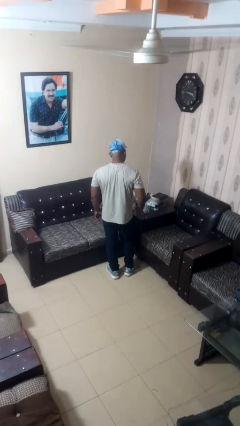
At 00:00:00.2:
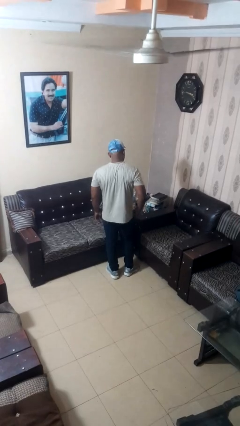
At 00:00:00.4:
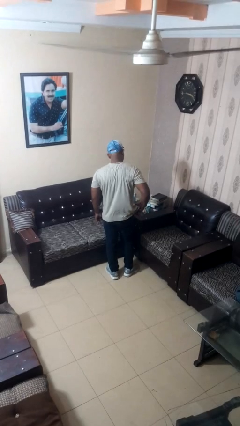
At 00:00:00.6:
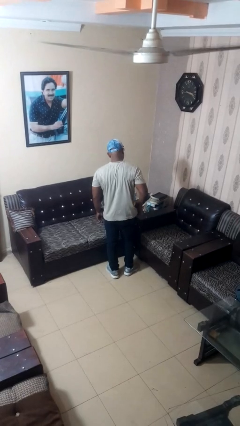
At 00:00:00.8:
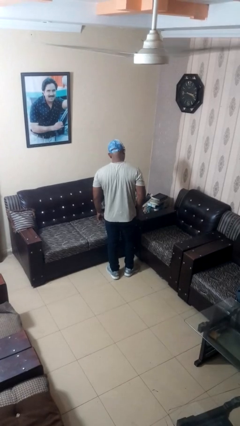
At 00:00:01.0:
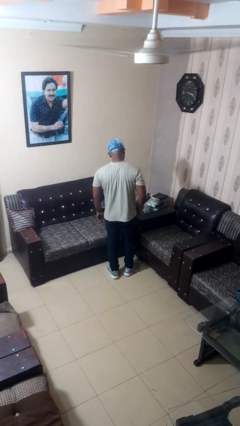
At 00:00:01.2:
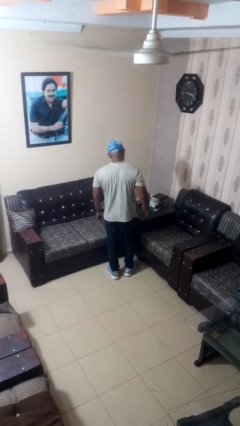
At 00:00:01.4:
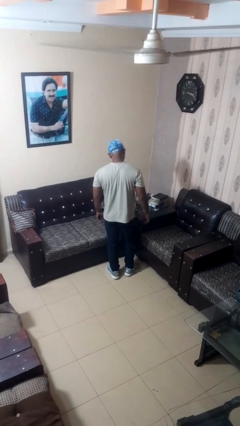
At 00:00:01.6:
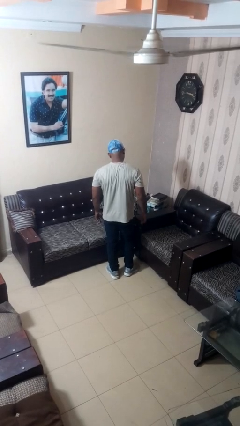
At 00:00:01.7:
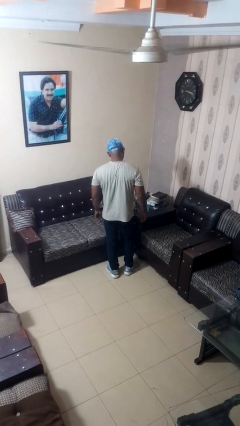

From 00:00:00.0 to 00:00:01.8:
person puts phone into pocket

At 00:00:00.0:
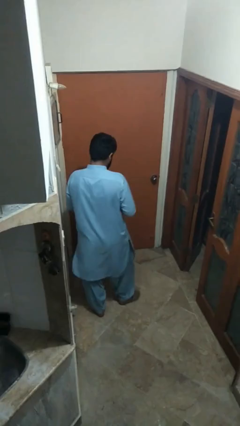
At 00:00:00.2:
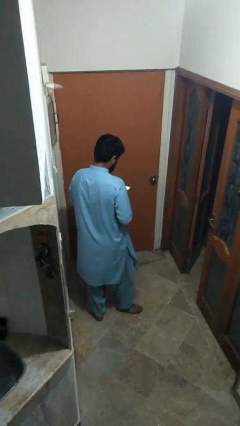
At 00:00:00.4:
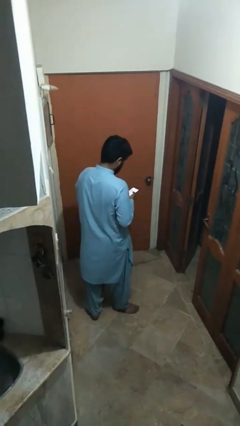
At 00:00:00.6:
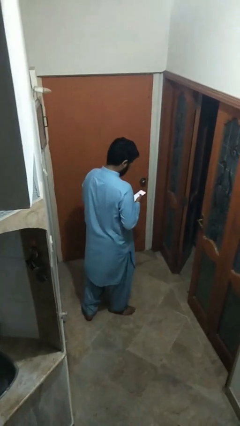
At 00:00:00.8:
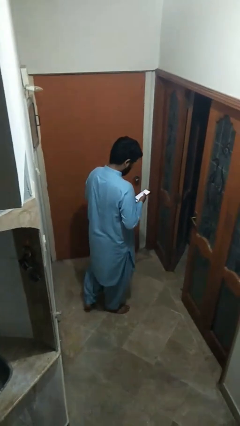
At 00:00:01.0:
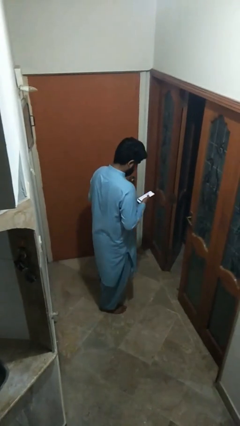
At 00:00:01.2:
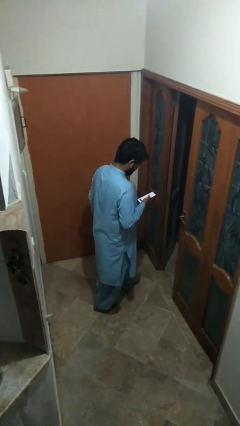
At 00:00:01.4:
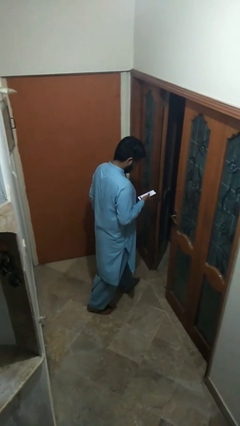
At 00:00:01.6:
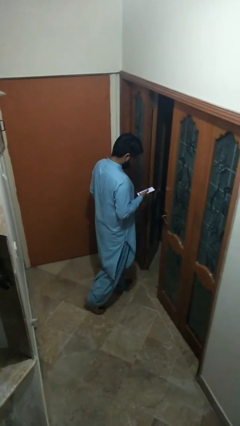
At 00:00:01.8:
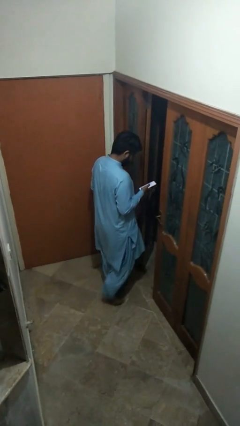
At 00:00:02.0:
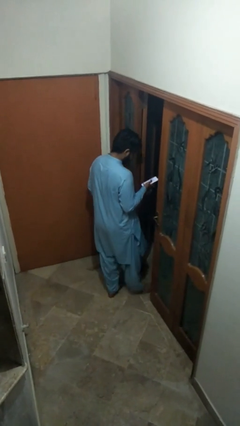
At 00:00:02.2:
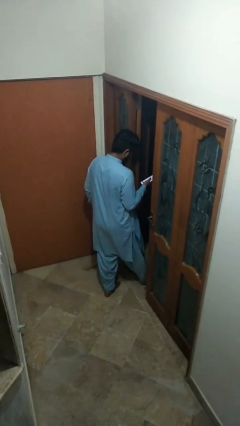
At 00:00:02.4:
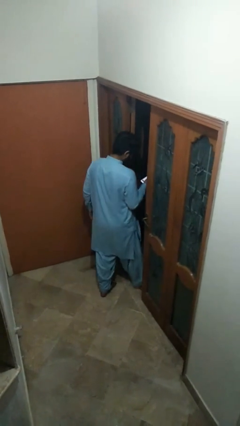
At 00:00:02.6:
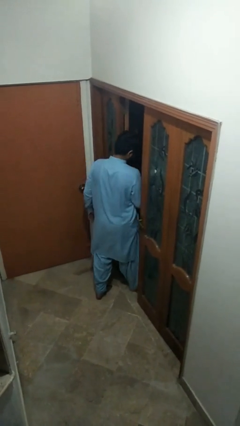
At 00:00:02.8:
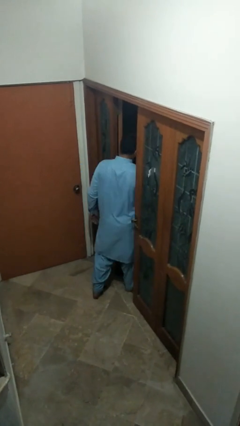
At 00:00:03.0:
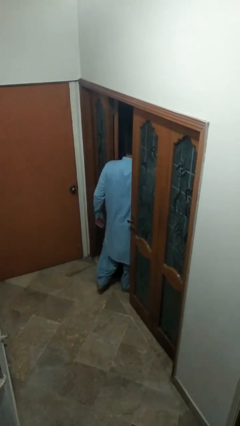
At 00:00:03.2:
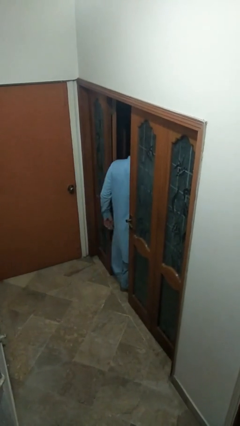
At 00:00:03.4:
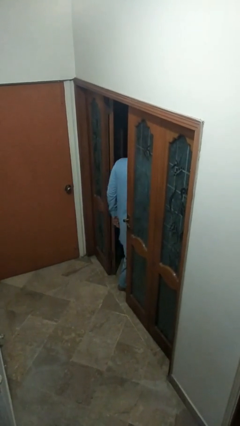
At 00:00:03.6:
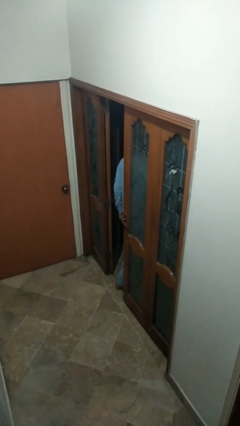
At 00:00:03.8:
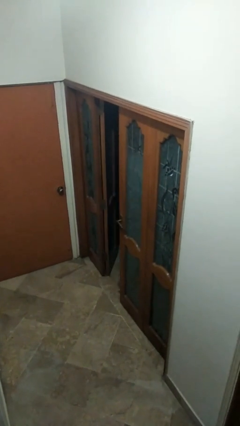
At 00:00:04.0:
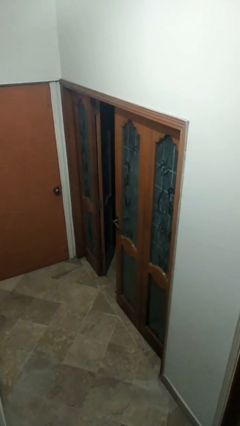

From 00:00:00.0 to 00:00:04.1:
person exits scene through structure

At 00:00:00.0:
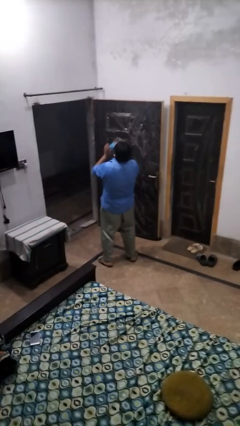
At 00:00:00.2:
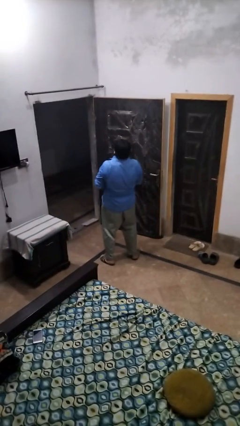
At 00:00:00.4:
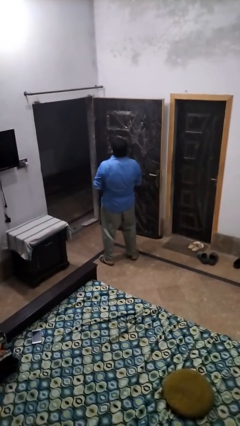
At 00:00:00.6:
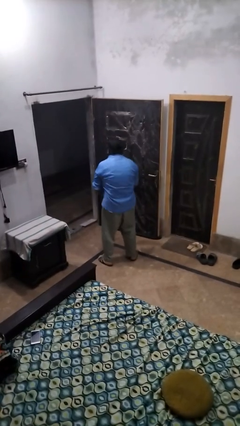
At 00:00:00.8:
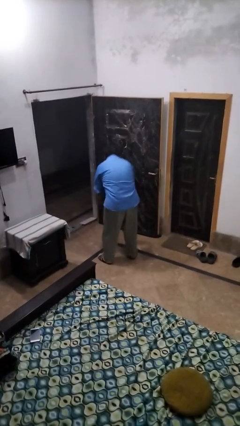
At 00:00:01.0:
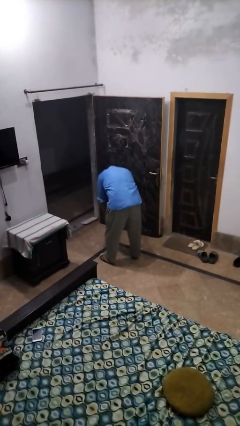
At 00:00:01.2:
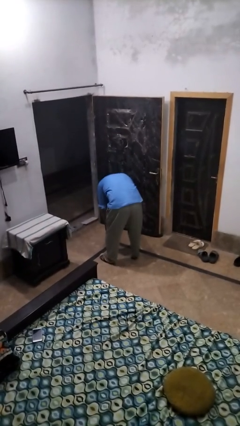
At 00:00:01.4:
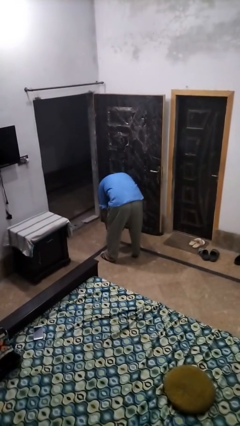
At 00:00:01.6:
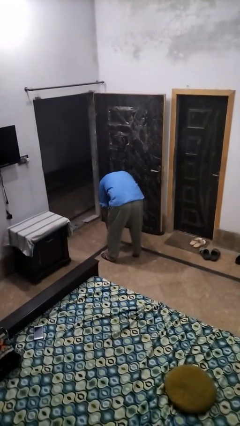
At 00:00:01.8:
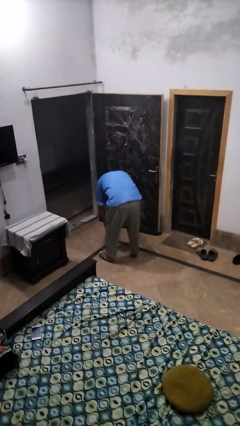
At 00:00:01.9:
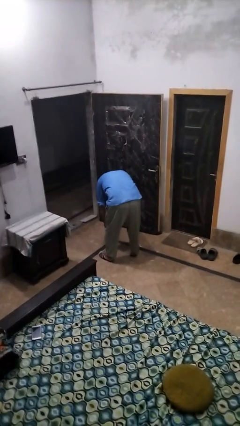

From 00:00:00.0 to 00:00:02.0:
person catches dropped object

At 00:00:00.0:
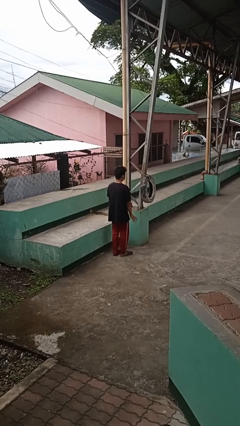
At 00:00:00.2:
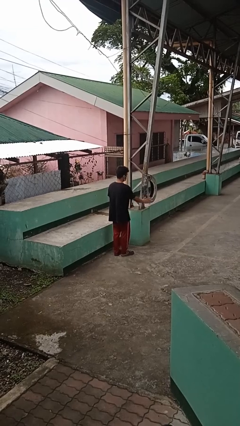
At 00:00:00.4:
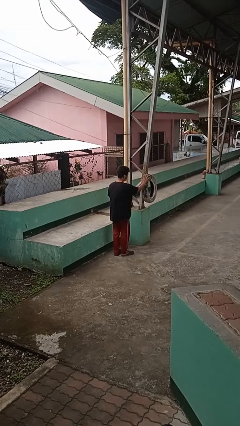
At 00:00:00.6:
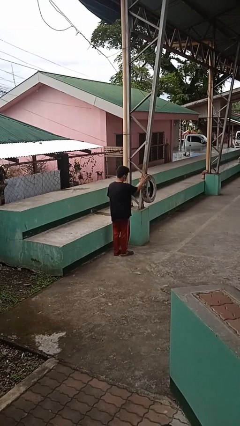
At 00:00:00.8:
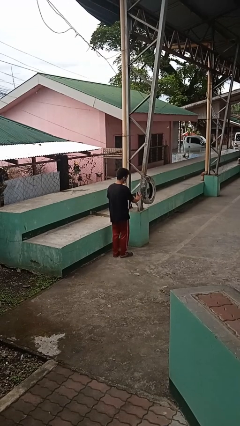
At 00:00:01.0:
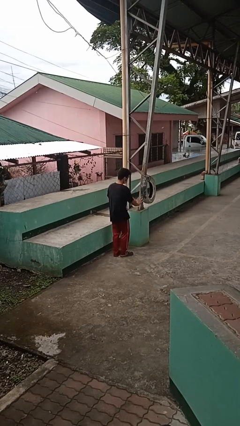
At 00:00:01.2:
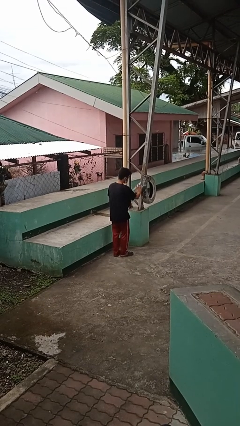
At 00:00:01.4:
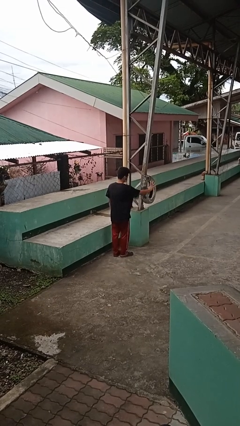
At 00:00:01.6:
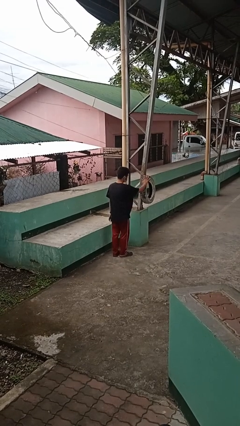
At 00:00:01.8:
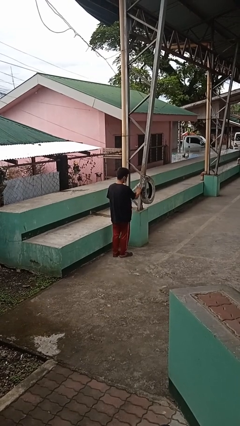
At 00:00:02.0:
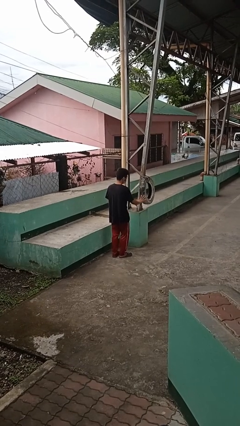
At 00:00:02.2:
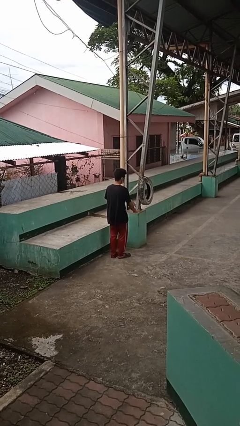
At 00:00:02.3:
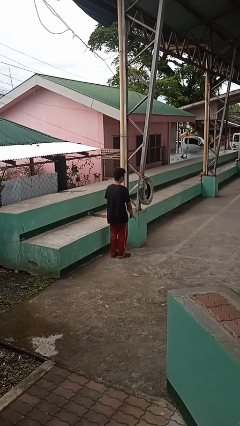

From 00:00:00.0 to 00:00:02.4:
person waves hand over object

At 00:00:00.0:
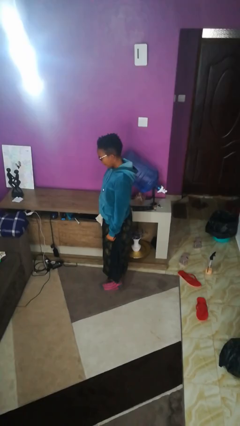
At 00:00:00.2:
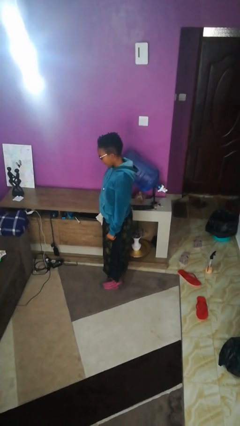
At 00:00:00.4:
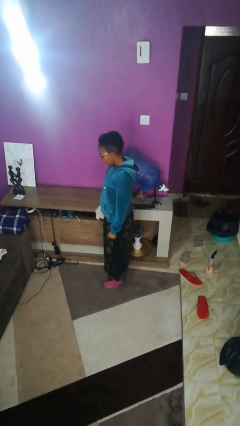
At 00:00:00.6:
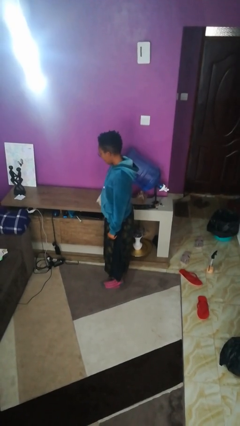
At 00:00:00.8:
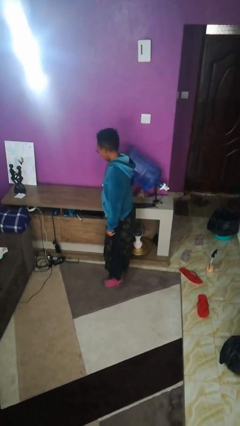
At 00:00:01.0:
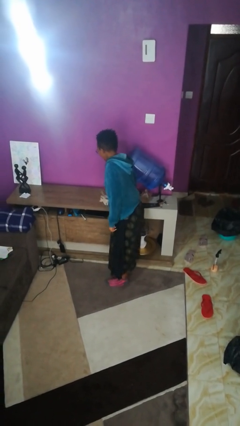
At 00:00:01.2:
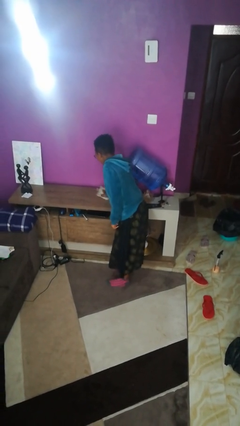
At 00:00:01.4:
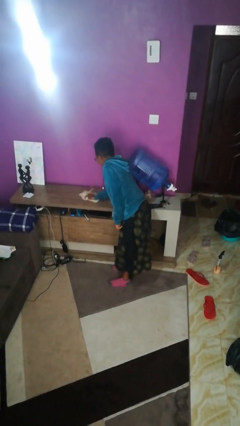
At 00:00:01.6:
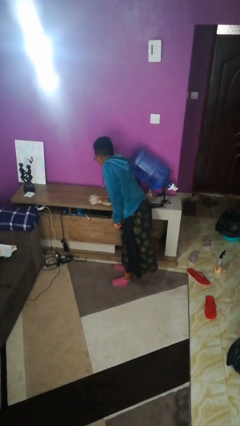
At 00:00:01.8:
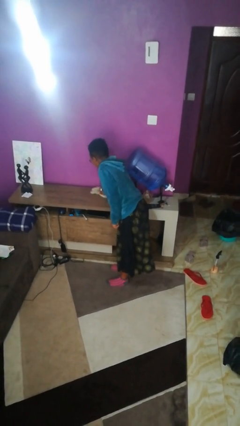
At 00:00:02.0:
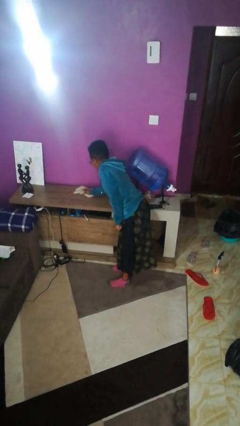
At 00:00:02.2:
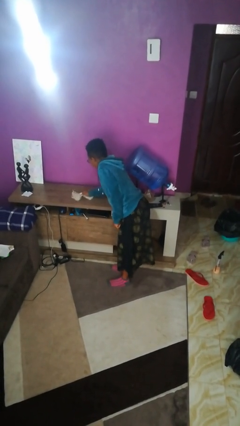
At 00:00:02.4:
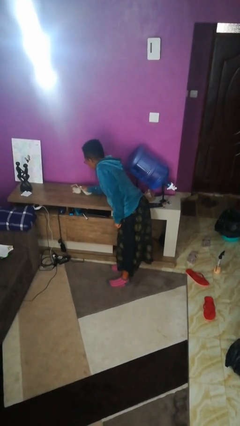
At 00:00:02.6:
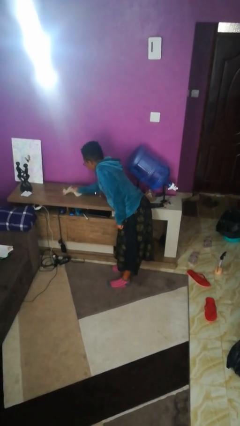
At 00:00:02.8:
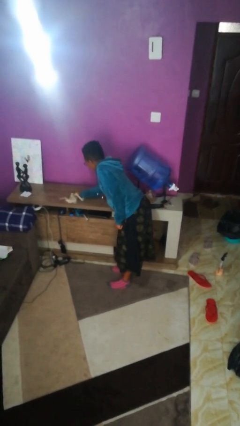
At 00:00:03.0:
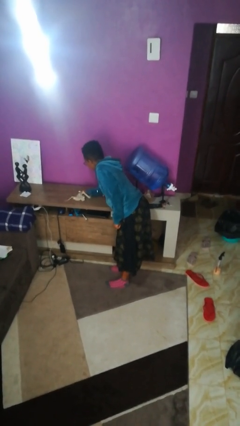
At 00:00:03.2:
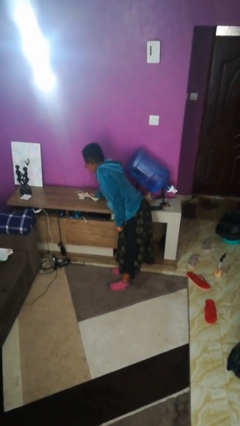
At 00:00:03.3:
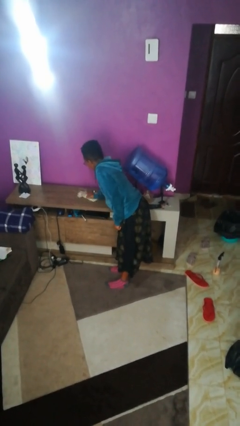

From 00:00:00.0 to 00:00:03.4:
person cleans table with rag

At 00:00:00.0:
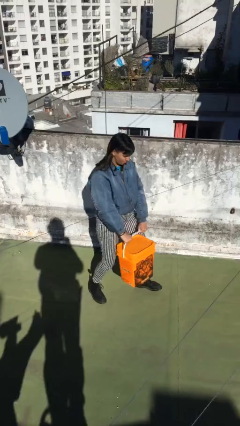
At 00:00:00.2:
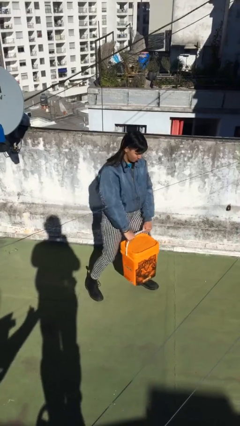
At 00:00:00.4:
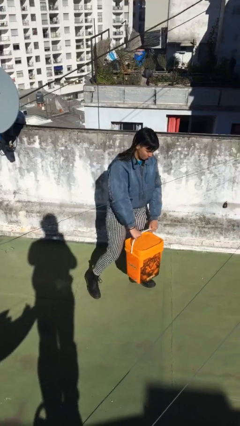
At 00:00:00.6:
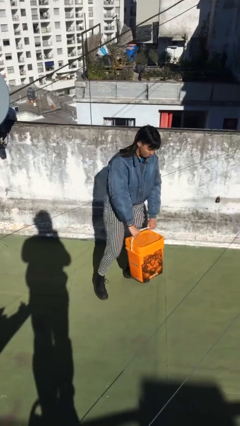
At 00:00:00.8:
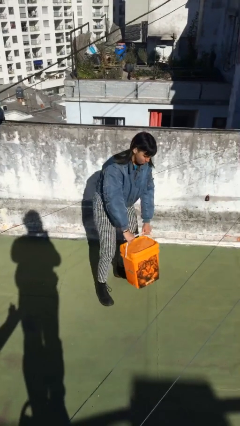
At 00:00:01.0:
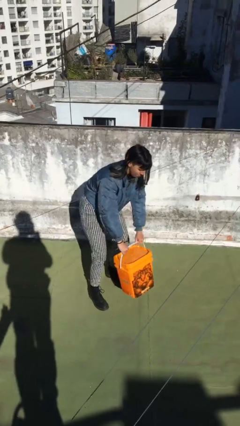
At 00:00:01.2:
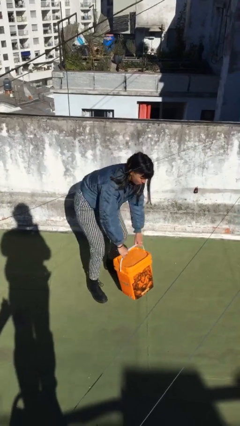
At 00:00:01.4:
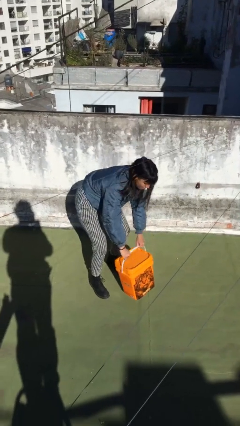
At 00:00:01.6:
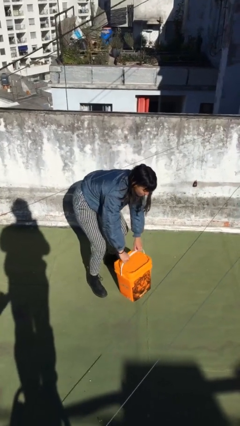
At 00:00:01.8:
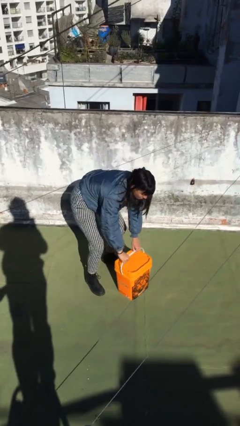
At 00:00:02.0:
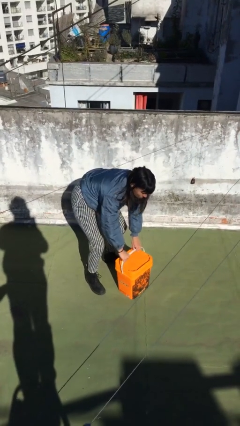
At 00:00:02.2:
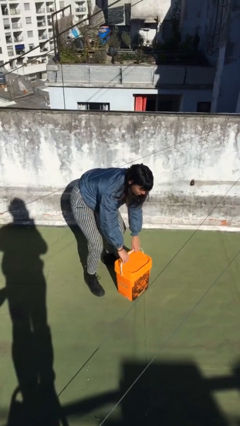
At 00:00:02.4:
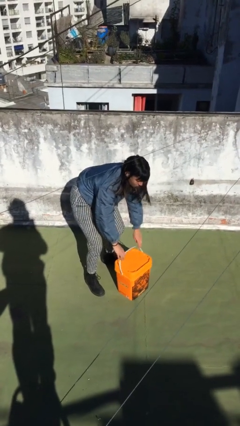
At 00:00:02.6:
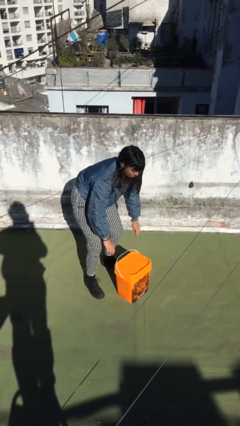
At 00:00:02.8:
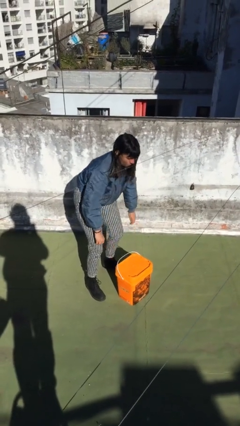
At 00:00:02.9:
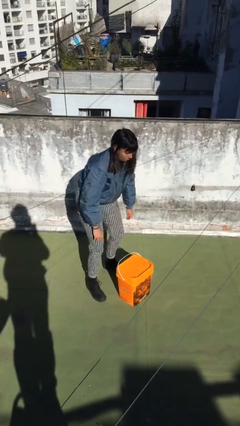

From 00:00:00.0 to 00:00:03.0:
person puts down object on floor

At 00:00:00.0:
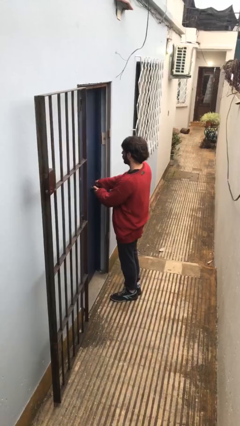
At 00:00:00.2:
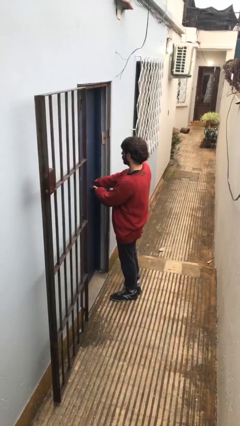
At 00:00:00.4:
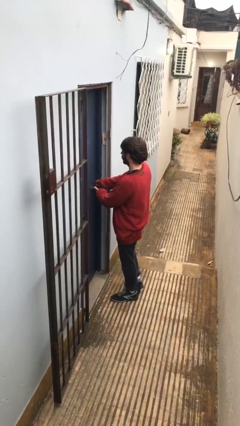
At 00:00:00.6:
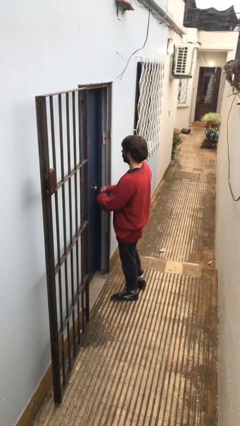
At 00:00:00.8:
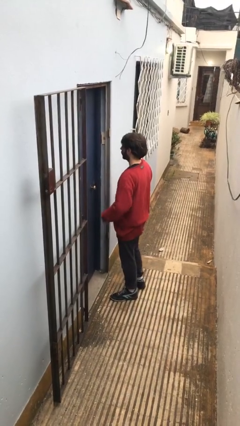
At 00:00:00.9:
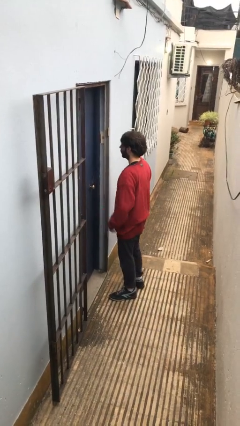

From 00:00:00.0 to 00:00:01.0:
person locks door with keys
